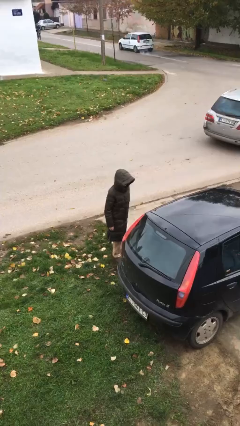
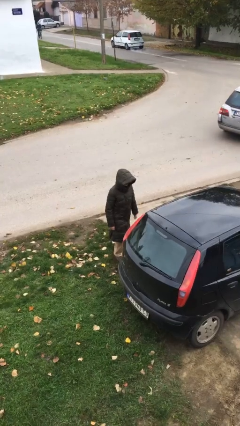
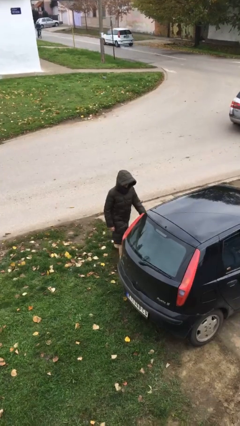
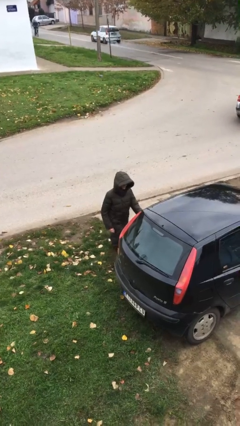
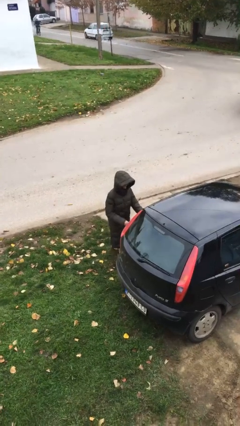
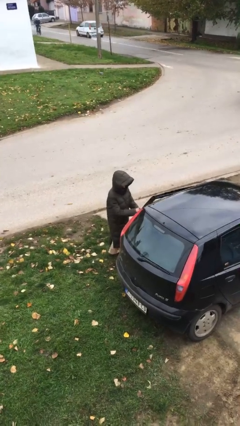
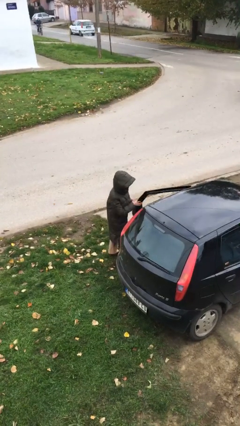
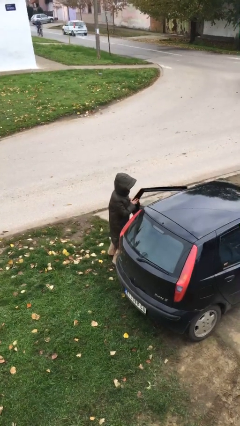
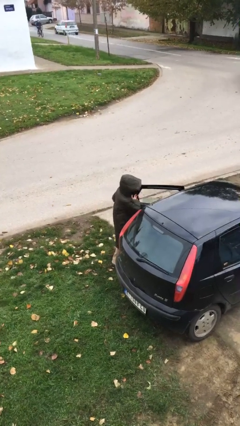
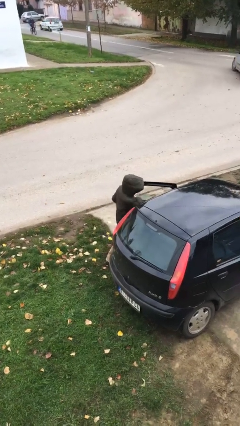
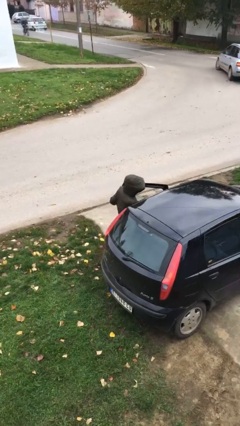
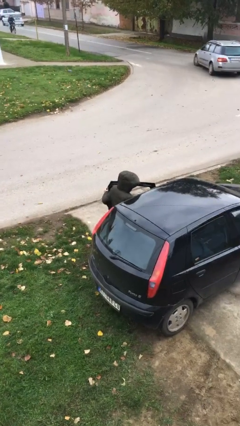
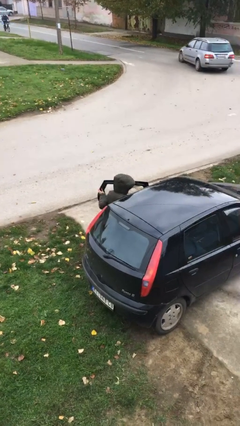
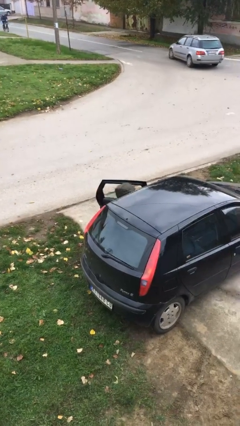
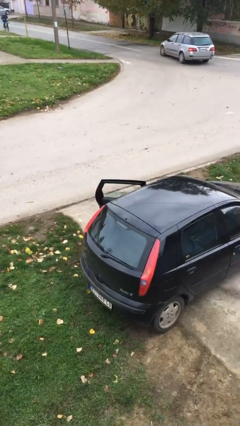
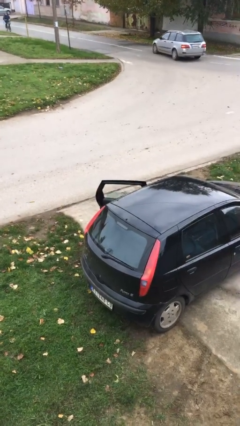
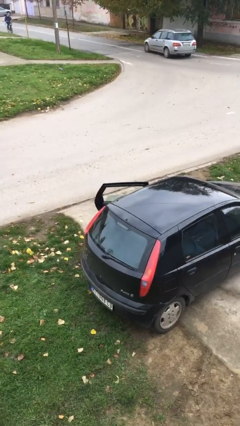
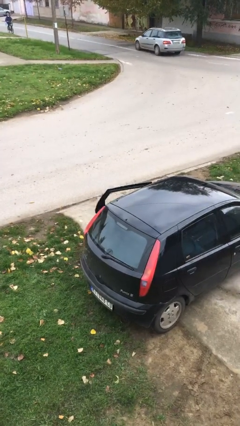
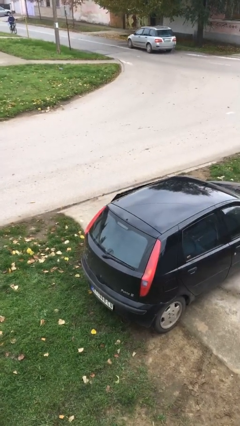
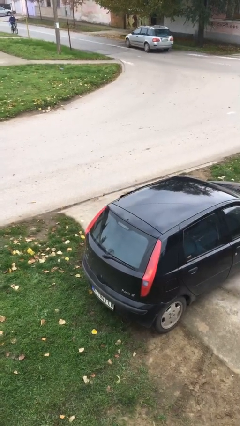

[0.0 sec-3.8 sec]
person enters car

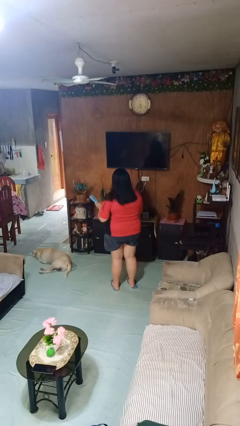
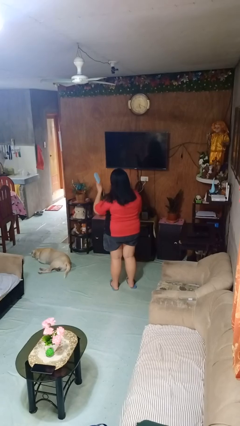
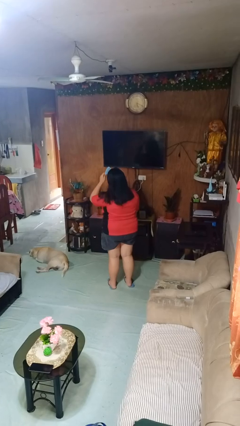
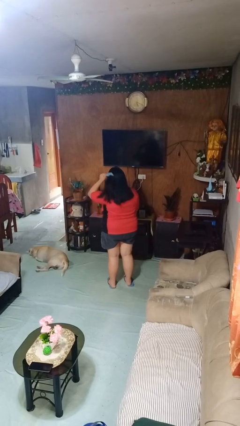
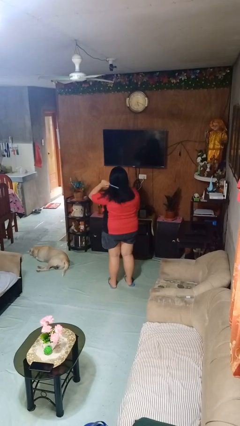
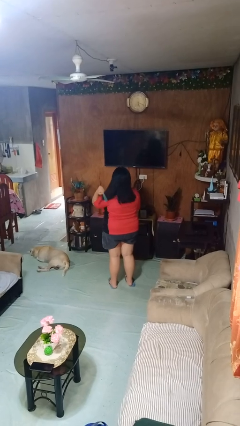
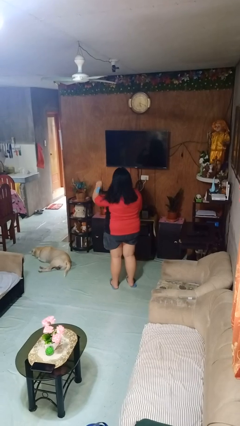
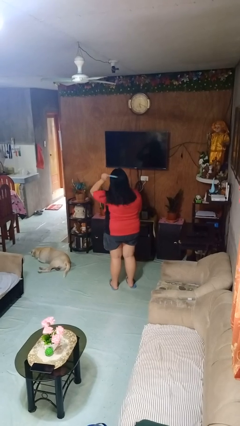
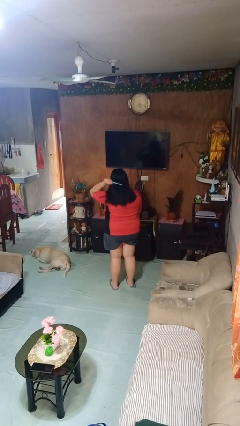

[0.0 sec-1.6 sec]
person brushes hair

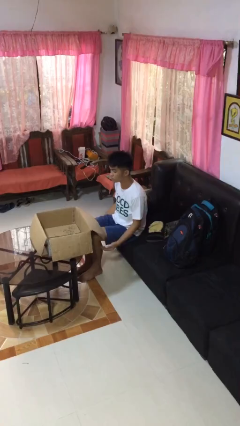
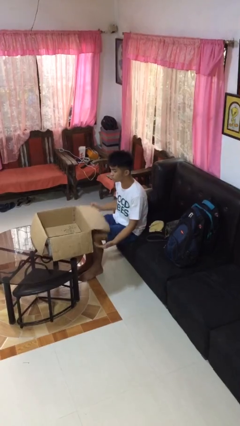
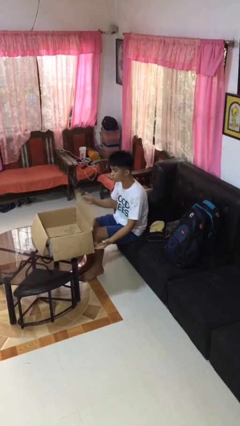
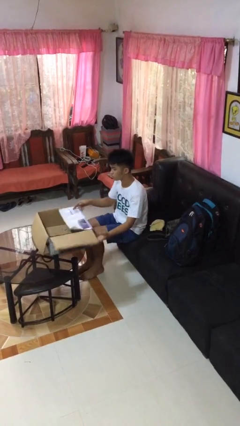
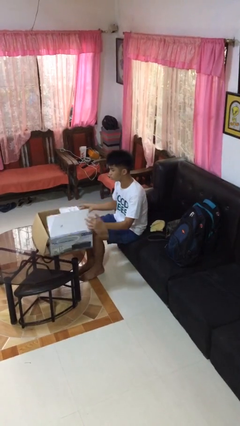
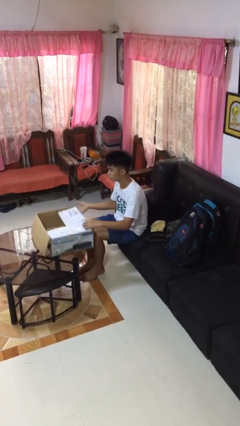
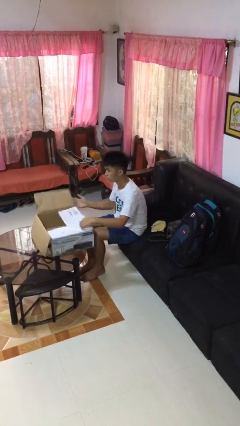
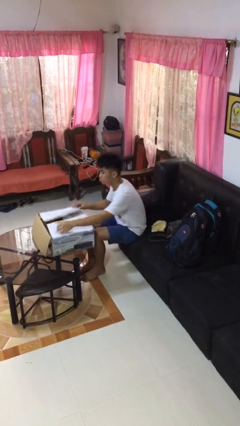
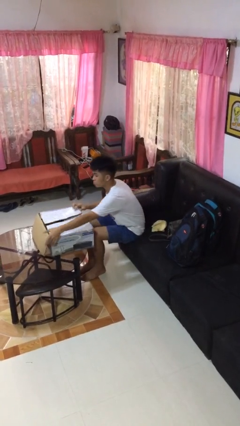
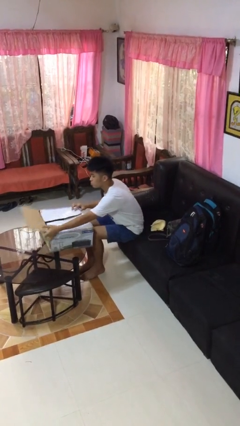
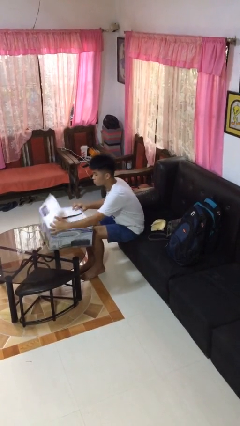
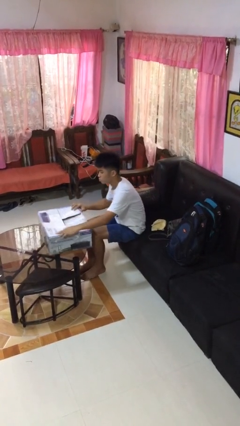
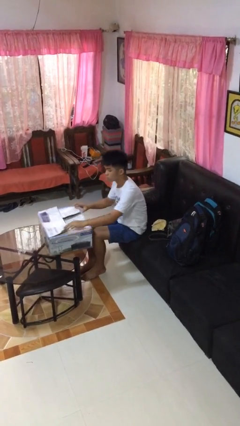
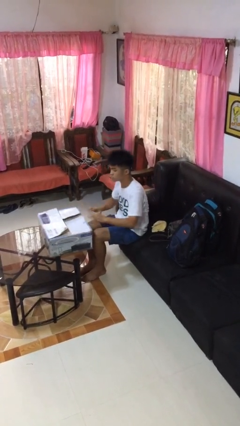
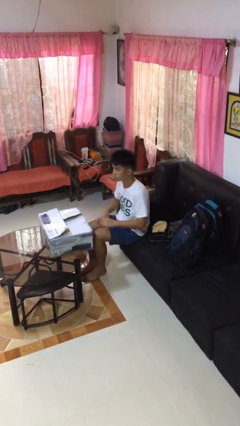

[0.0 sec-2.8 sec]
person closes box

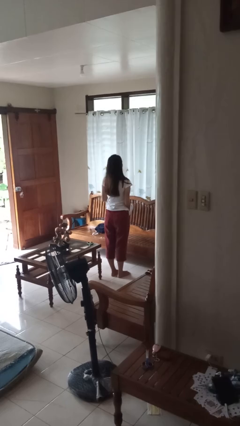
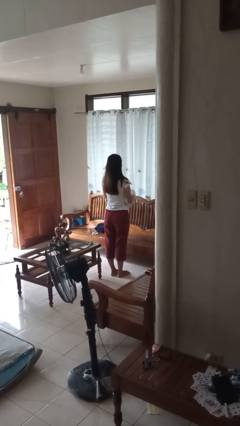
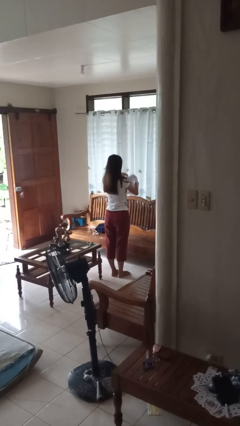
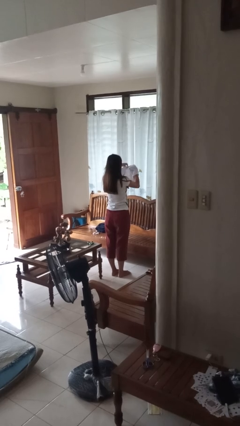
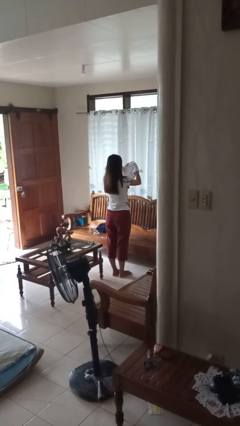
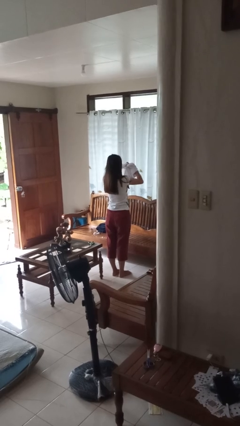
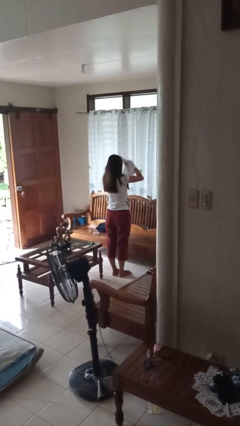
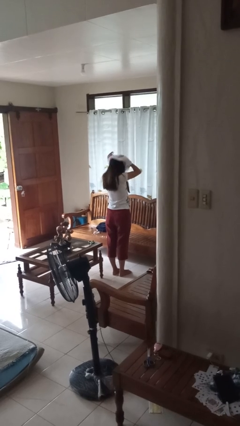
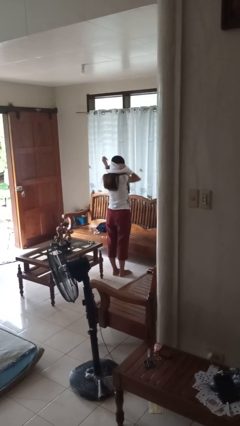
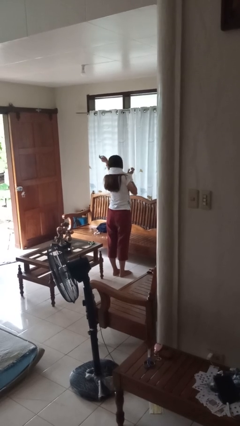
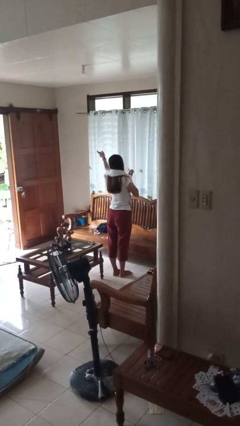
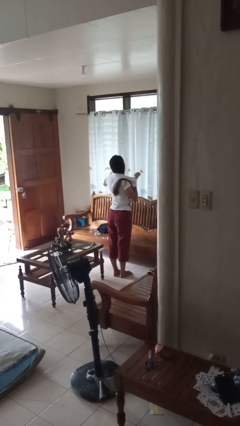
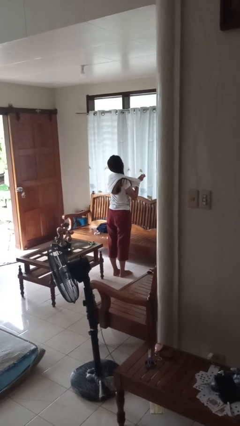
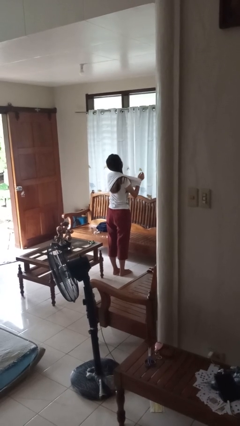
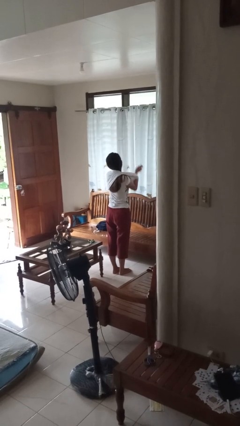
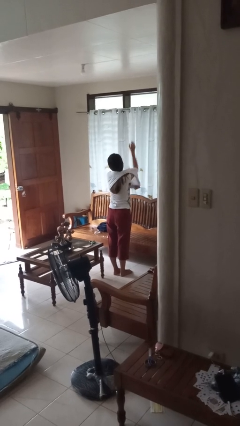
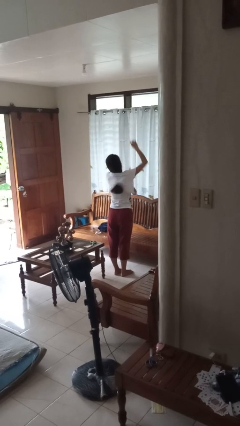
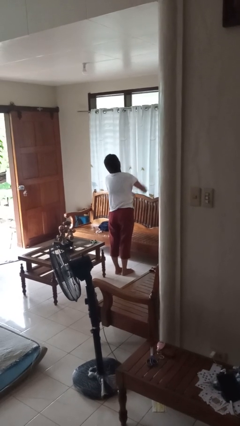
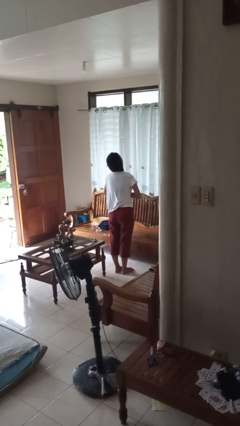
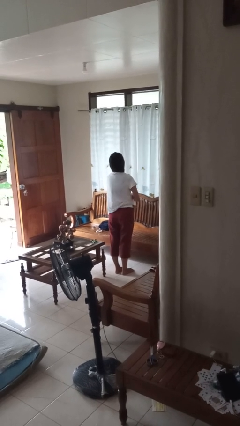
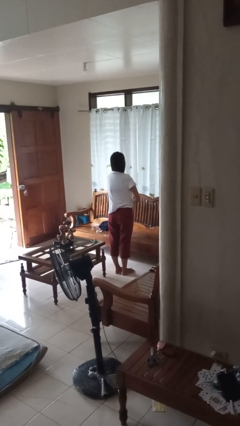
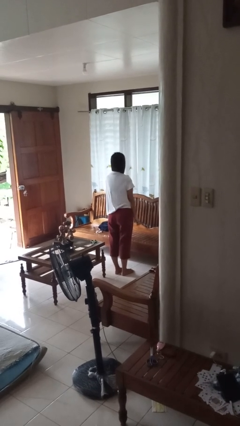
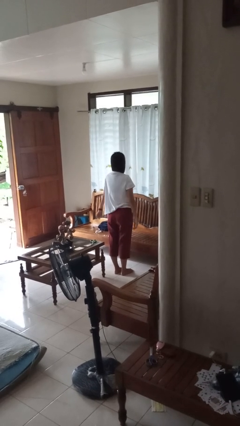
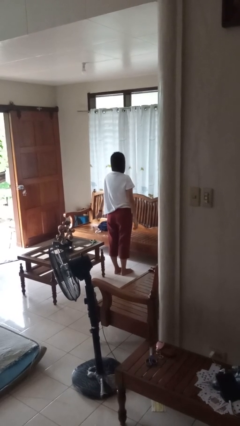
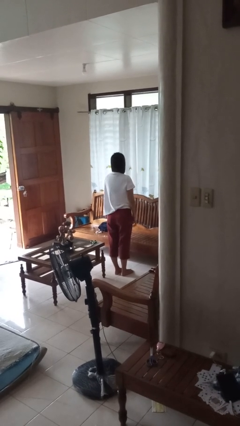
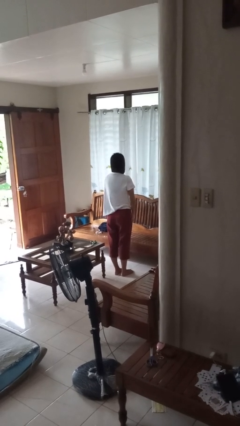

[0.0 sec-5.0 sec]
person puts on shirt

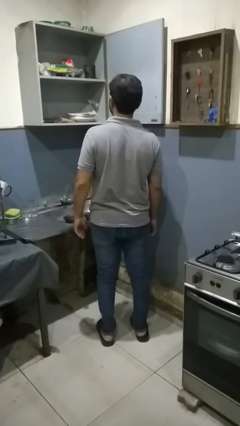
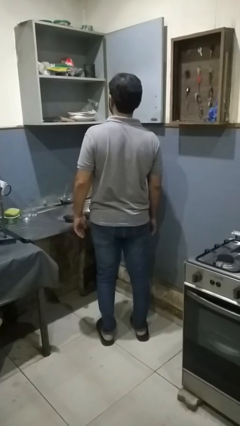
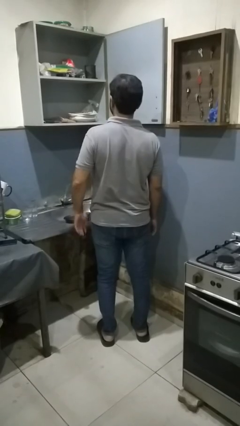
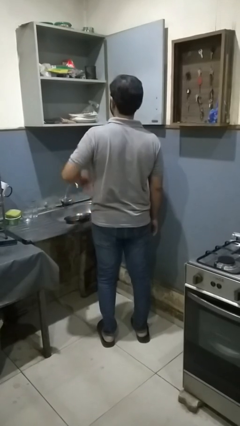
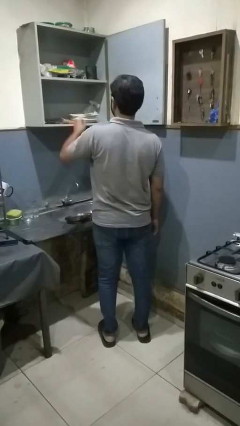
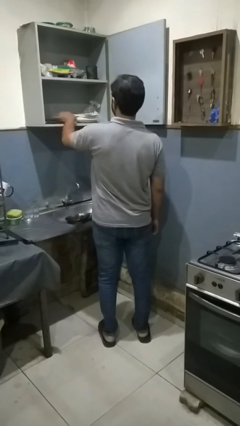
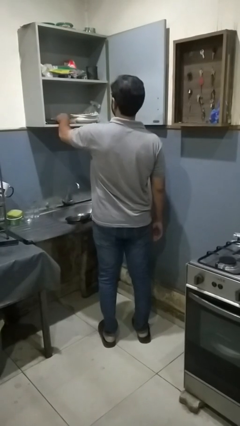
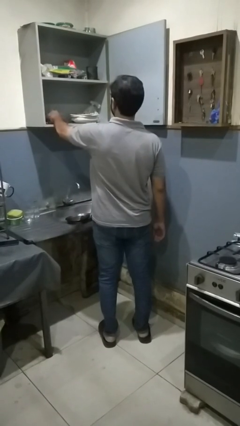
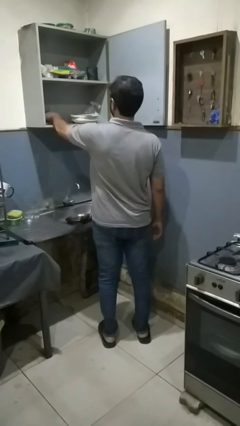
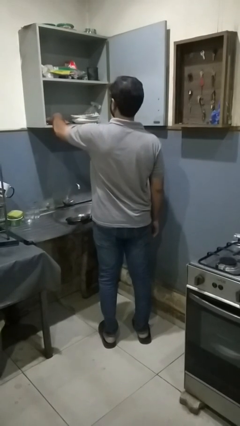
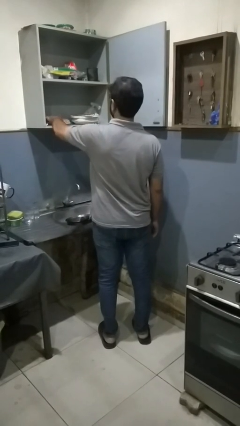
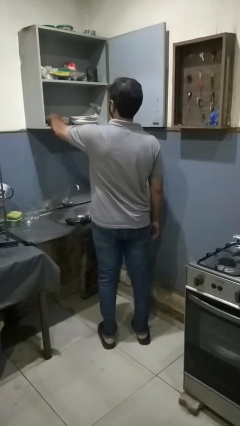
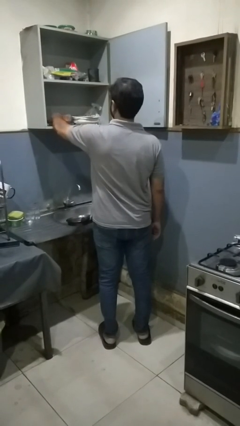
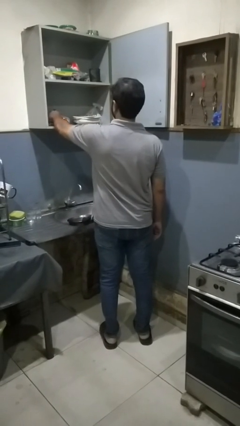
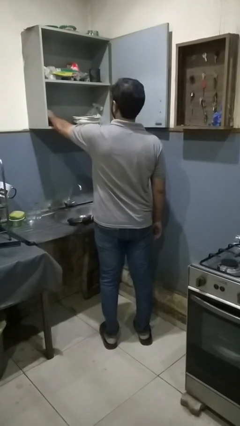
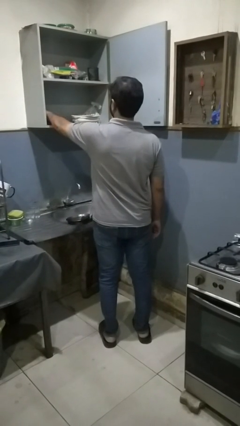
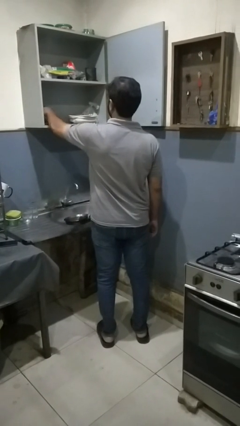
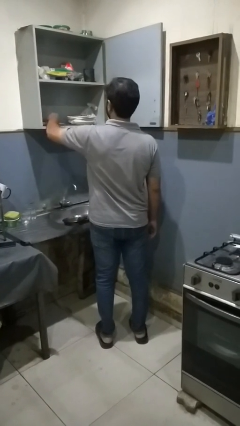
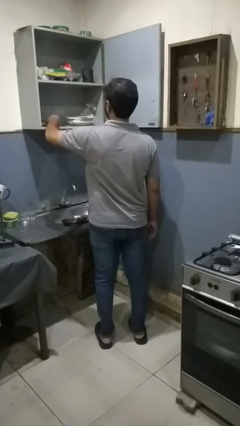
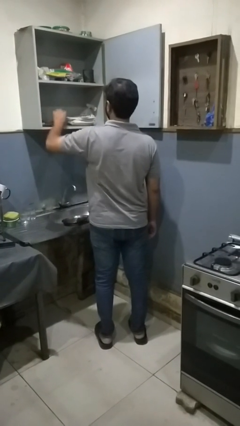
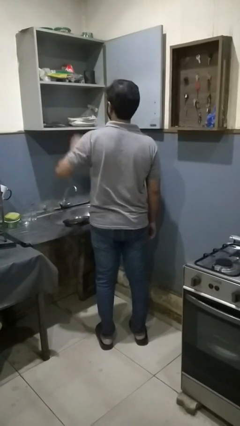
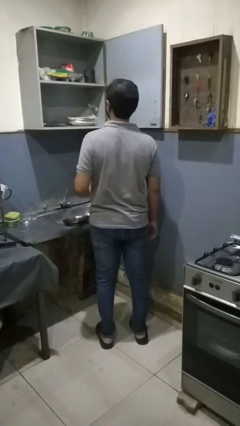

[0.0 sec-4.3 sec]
person searches in kitchen drawer
